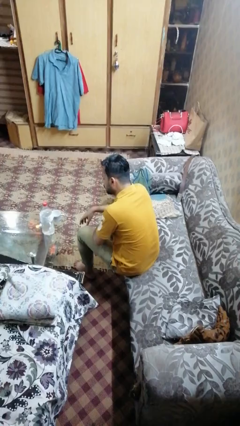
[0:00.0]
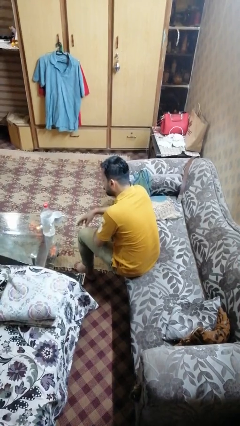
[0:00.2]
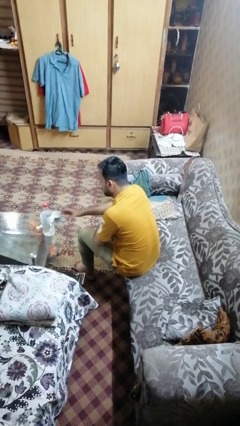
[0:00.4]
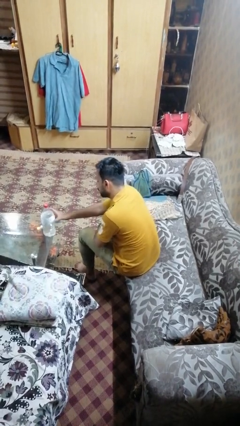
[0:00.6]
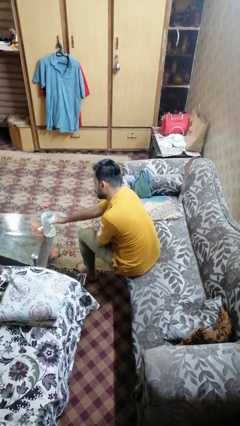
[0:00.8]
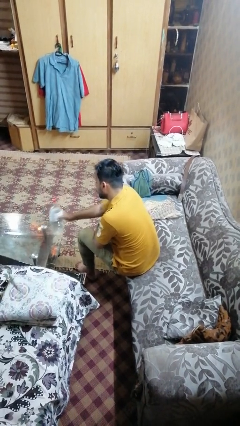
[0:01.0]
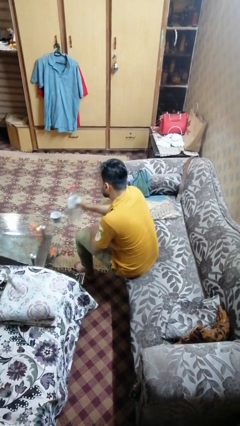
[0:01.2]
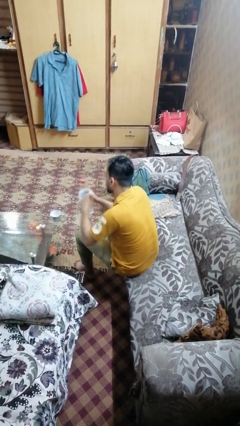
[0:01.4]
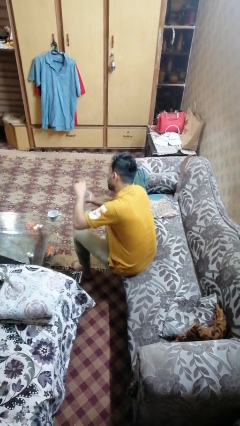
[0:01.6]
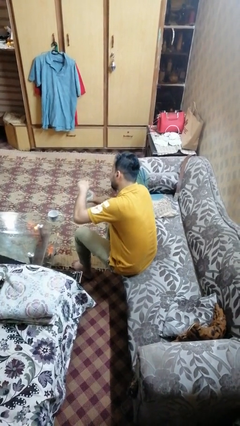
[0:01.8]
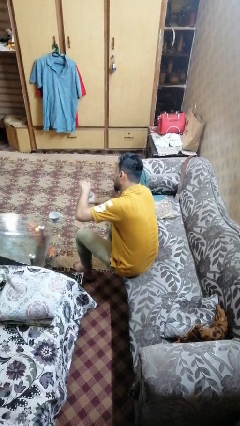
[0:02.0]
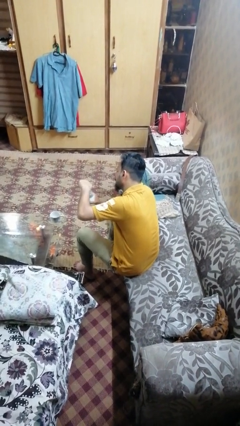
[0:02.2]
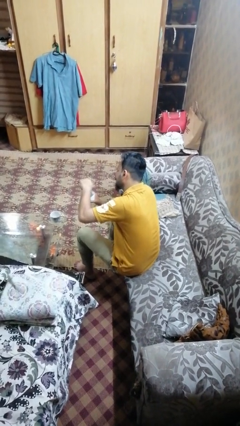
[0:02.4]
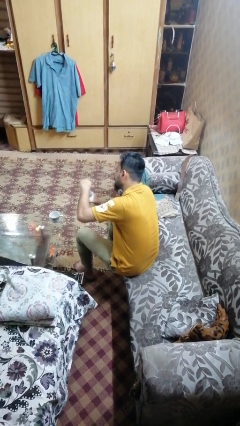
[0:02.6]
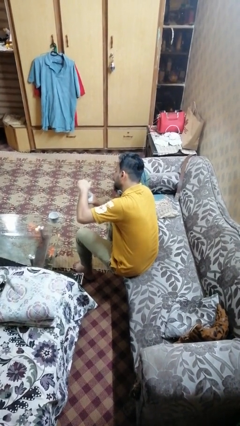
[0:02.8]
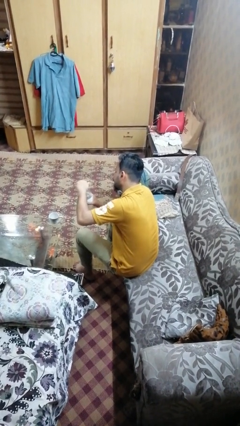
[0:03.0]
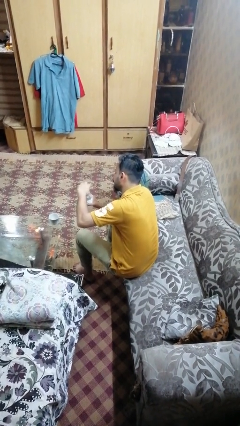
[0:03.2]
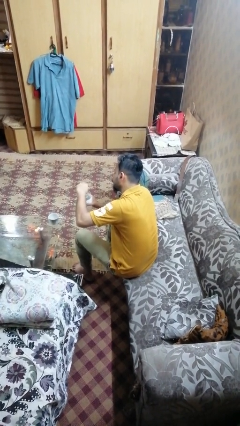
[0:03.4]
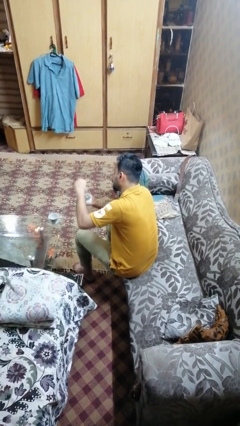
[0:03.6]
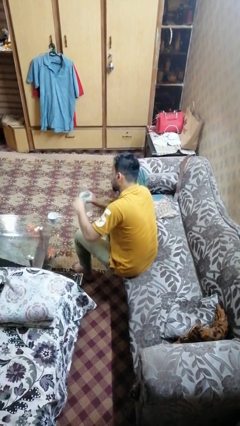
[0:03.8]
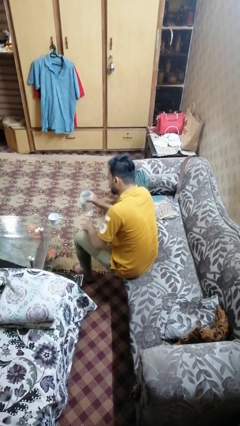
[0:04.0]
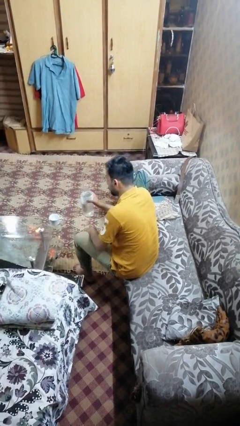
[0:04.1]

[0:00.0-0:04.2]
person unscrews lid from bottle

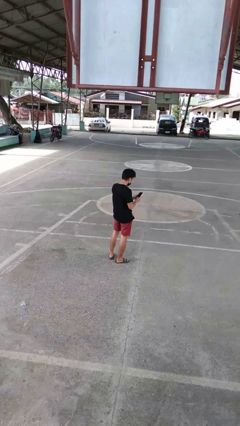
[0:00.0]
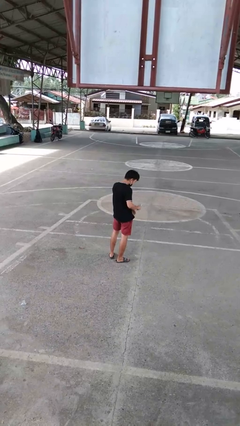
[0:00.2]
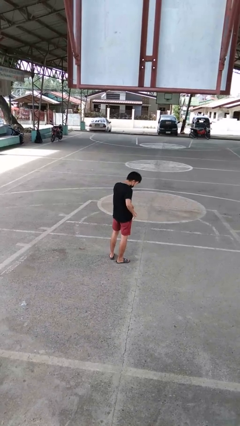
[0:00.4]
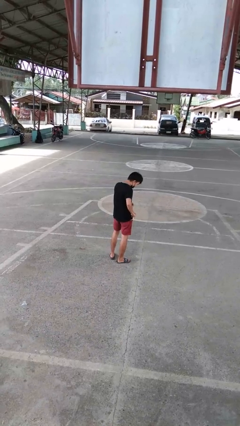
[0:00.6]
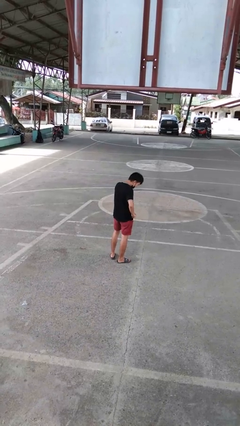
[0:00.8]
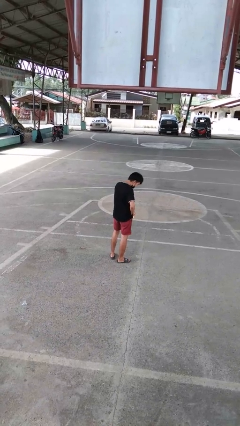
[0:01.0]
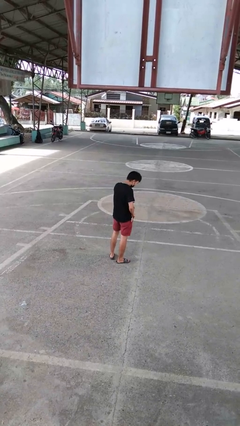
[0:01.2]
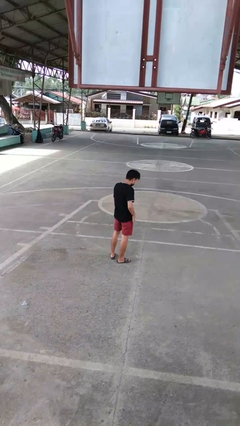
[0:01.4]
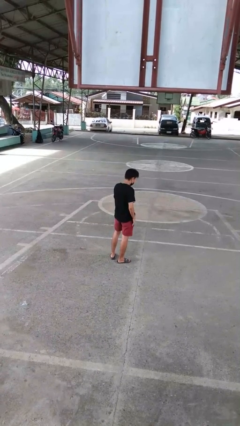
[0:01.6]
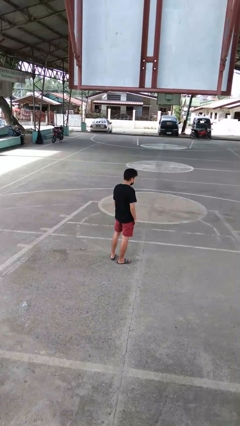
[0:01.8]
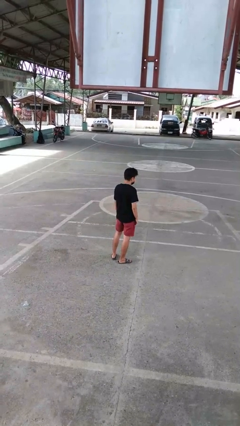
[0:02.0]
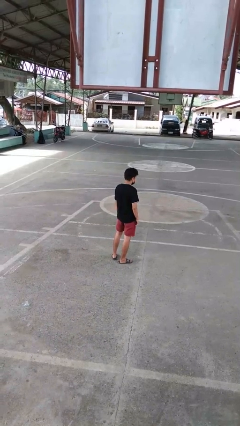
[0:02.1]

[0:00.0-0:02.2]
person puts phone into pocket

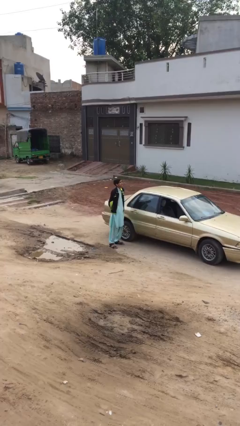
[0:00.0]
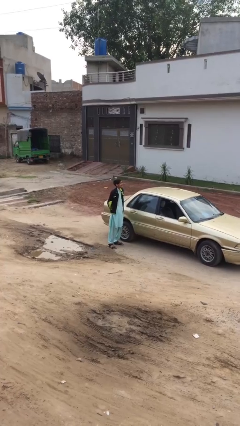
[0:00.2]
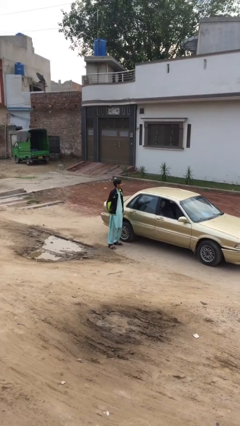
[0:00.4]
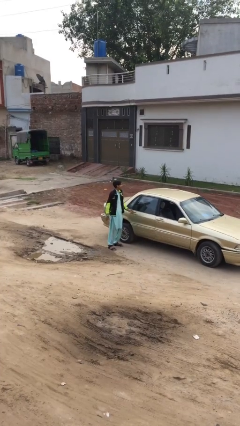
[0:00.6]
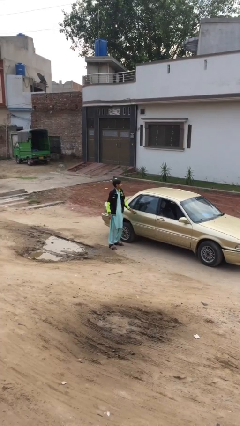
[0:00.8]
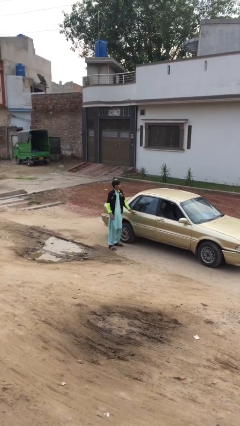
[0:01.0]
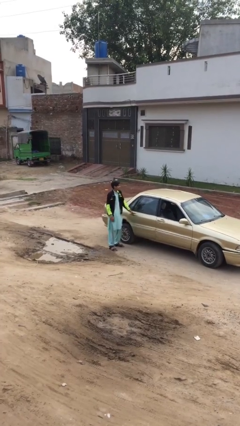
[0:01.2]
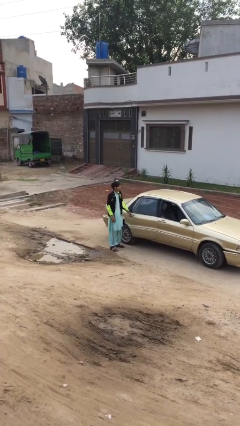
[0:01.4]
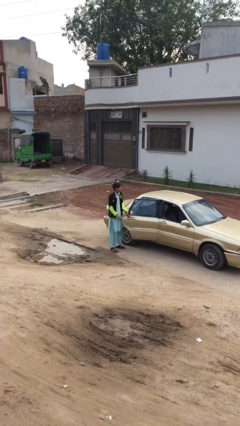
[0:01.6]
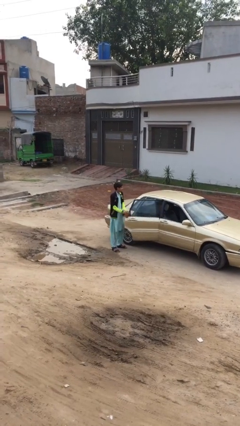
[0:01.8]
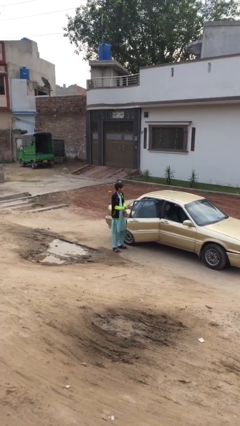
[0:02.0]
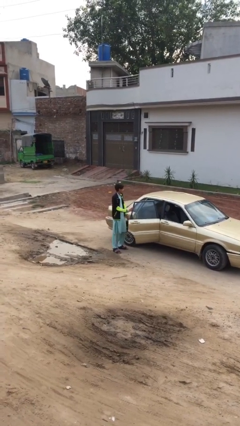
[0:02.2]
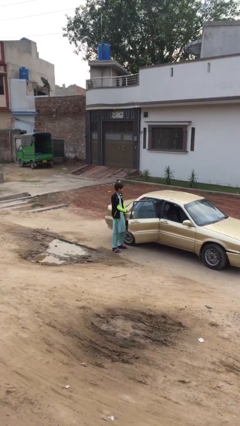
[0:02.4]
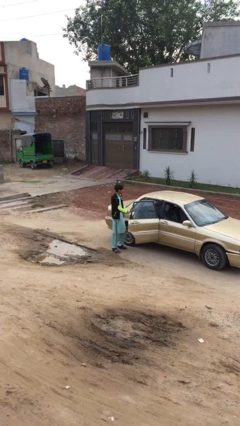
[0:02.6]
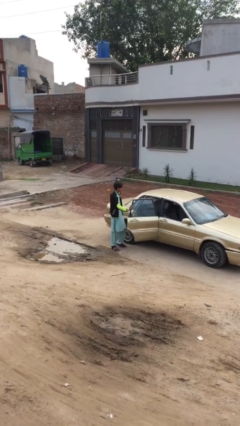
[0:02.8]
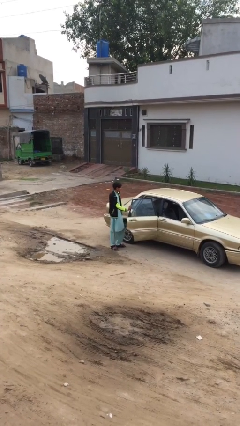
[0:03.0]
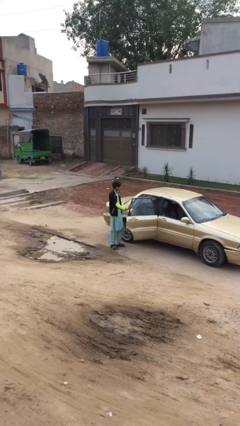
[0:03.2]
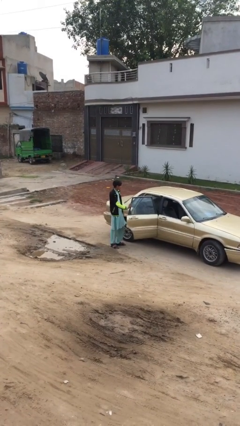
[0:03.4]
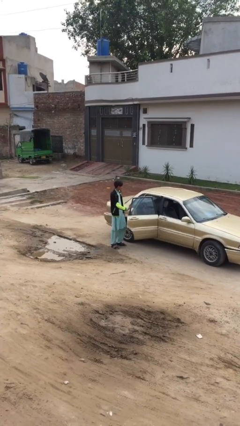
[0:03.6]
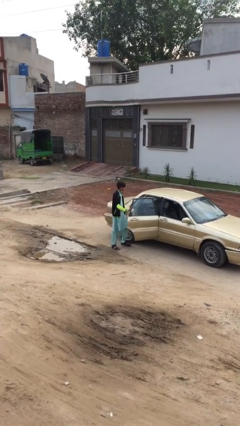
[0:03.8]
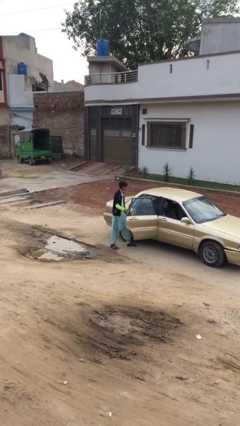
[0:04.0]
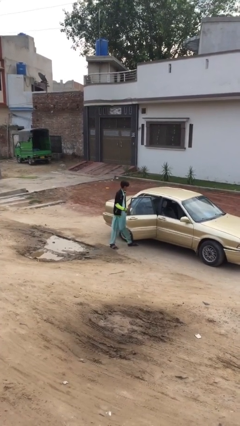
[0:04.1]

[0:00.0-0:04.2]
person opens car door

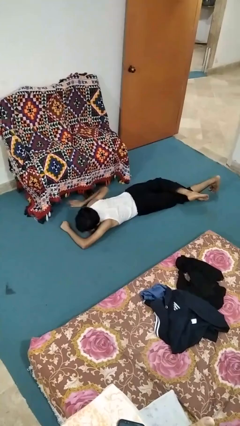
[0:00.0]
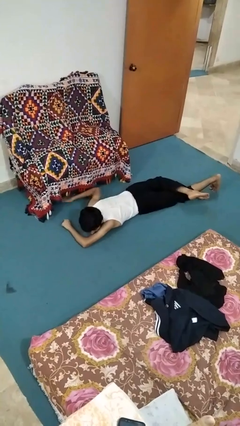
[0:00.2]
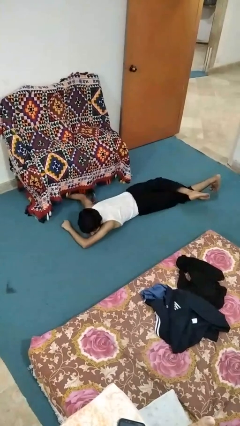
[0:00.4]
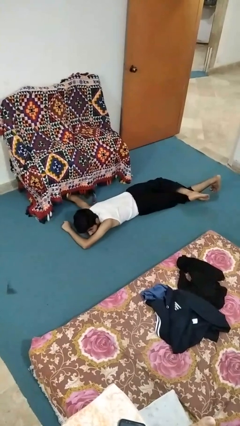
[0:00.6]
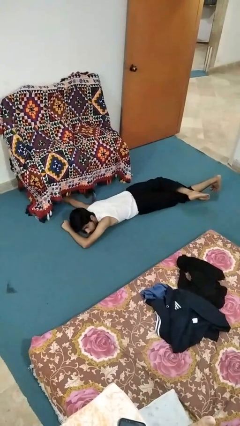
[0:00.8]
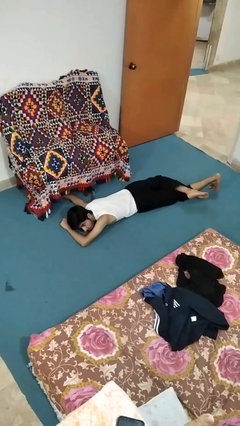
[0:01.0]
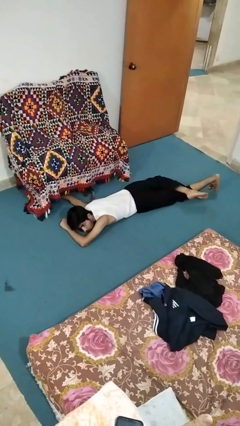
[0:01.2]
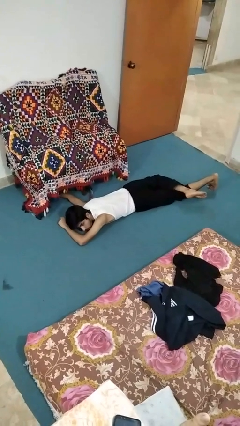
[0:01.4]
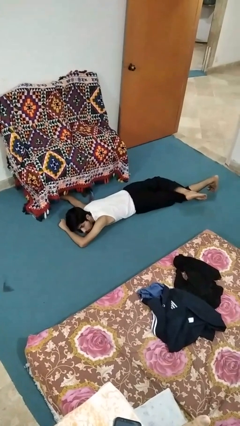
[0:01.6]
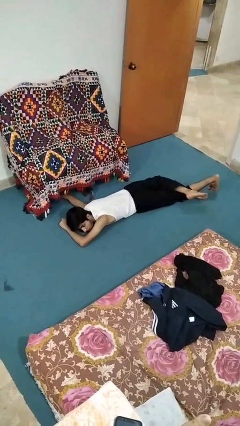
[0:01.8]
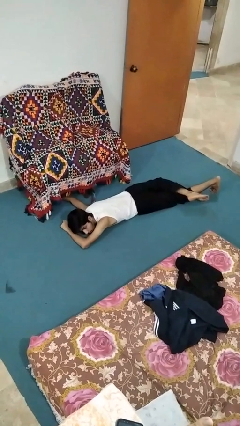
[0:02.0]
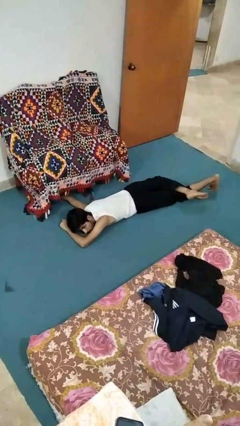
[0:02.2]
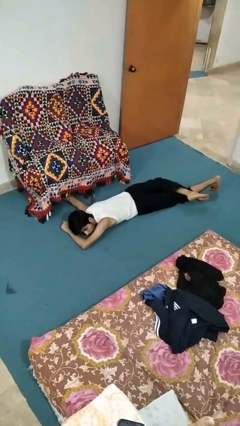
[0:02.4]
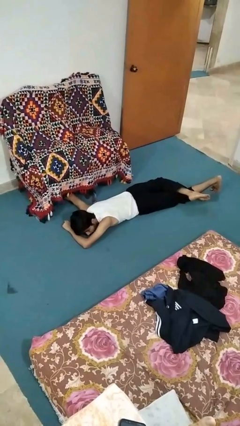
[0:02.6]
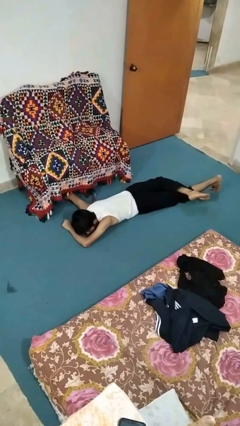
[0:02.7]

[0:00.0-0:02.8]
person searches under couch

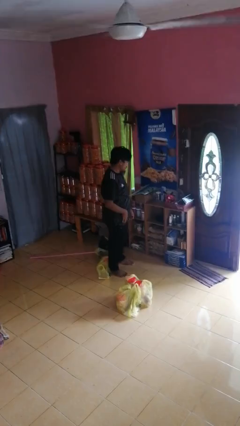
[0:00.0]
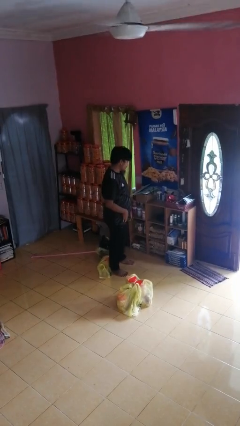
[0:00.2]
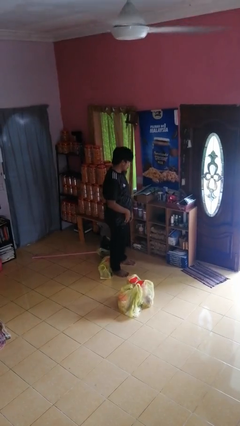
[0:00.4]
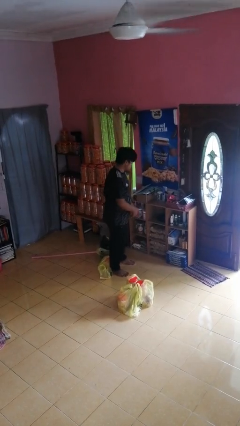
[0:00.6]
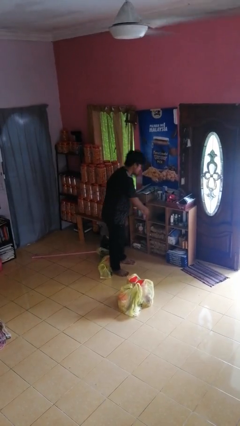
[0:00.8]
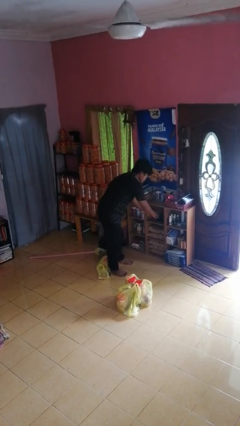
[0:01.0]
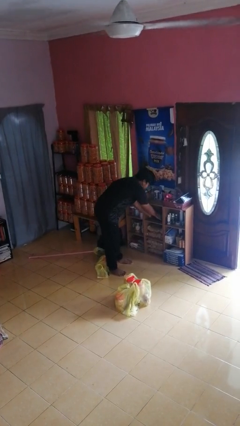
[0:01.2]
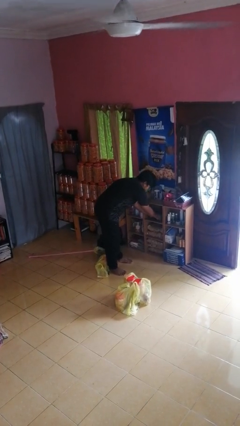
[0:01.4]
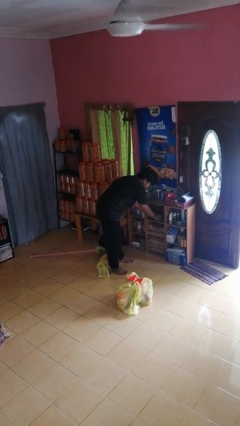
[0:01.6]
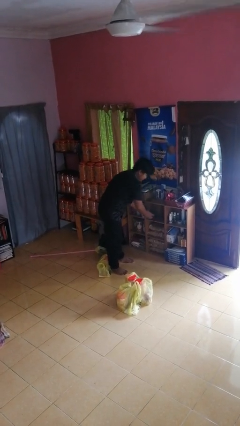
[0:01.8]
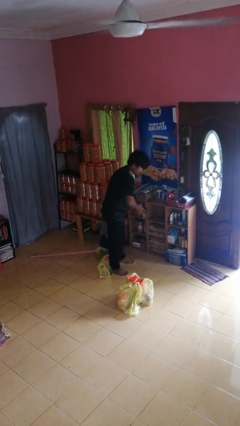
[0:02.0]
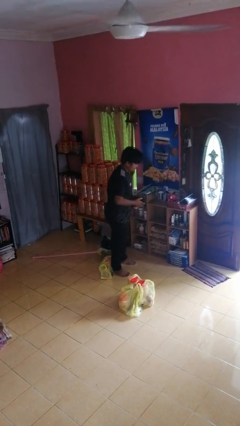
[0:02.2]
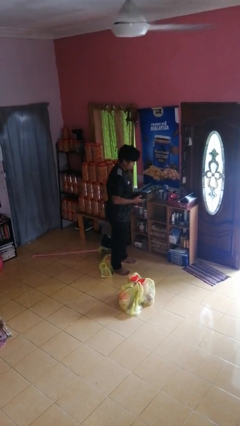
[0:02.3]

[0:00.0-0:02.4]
person takes object from cabinet

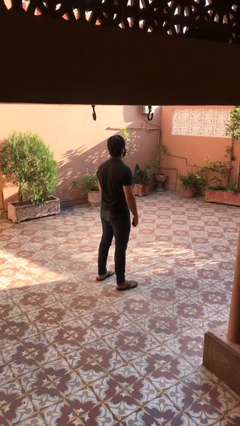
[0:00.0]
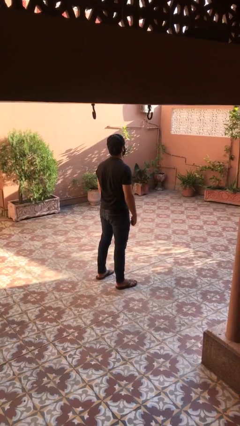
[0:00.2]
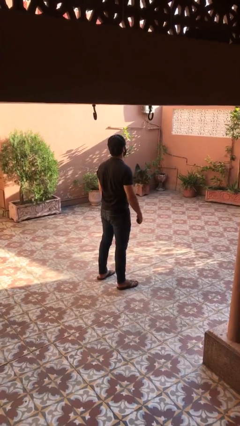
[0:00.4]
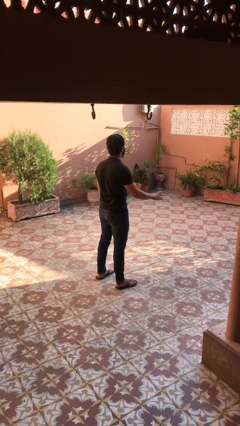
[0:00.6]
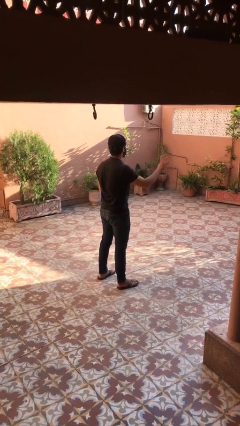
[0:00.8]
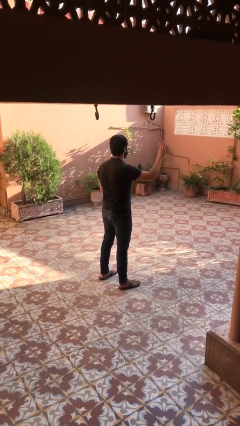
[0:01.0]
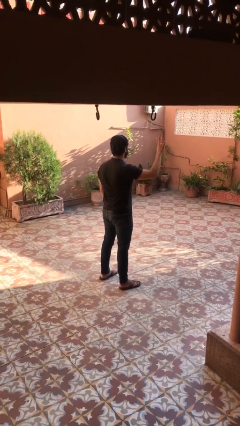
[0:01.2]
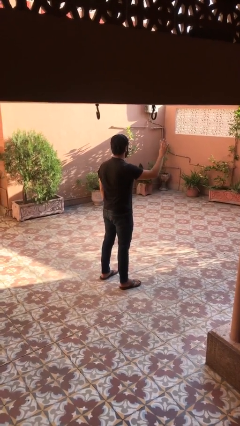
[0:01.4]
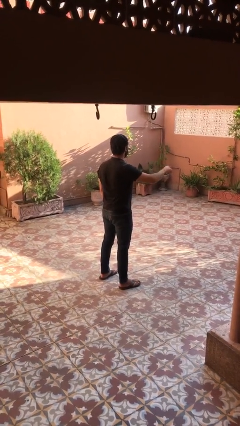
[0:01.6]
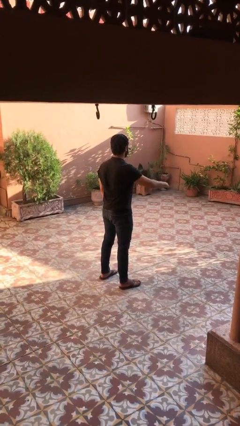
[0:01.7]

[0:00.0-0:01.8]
person gestures number four
